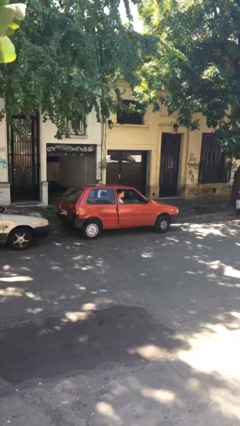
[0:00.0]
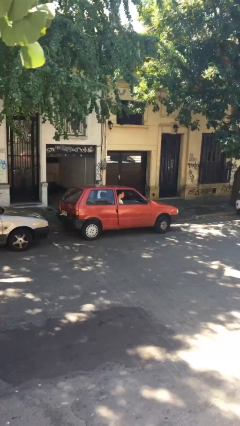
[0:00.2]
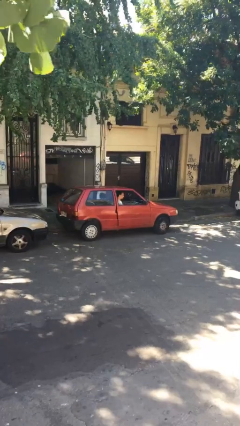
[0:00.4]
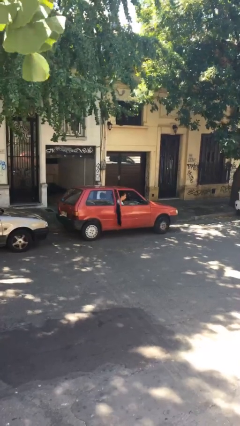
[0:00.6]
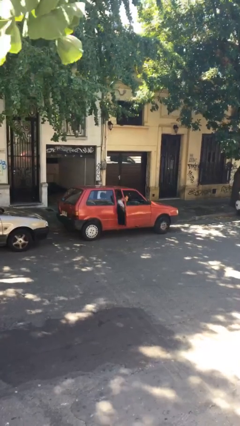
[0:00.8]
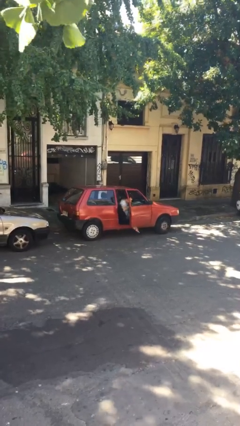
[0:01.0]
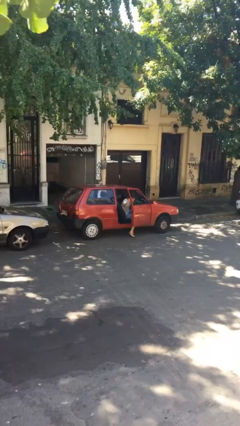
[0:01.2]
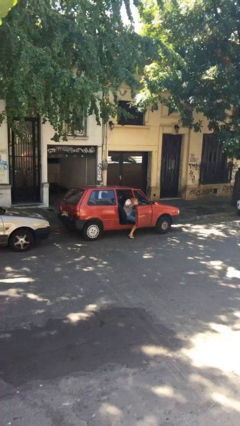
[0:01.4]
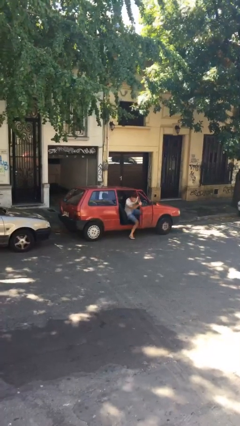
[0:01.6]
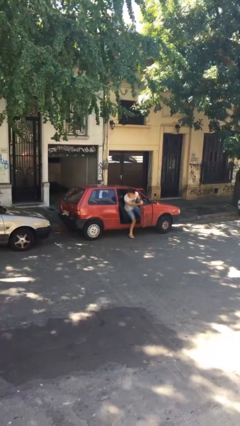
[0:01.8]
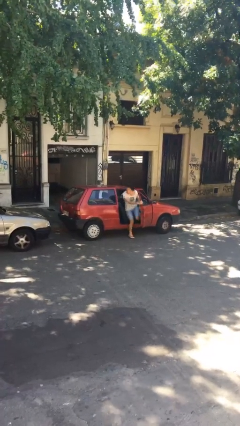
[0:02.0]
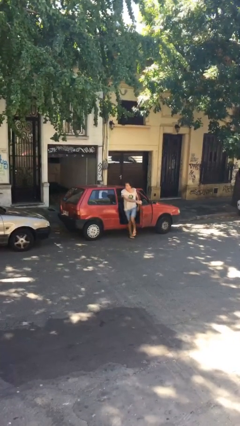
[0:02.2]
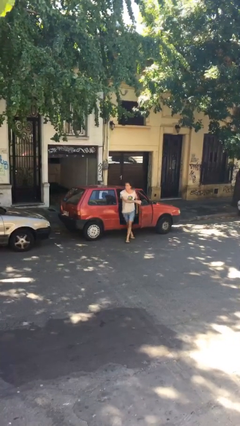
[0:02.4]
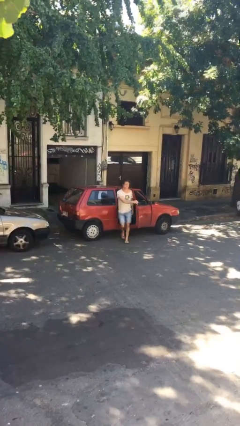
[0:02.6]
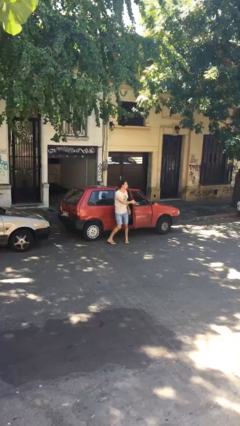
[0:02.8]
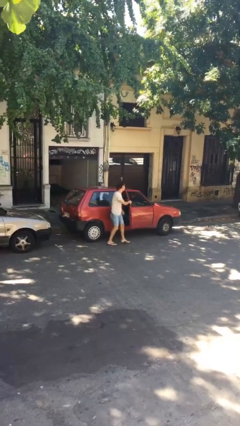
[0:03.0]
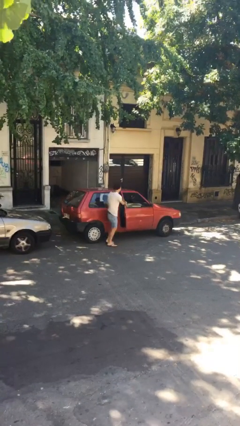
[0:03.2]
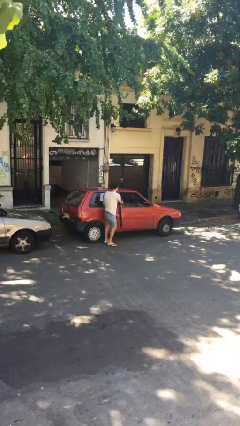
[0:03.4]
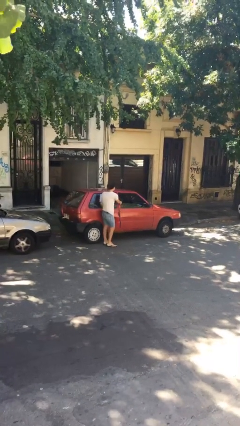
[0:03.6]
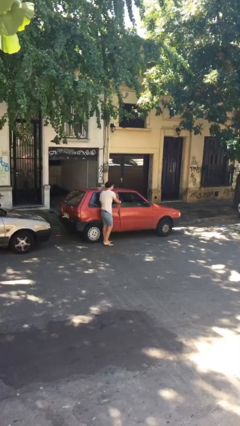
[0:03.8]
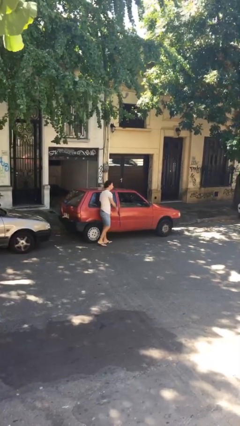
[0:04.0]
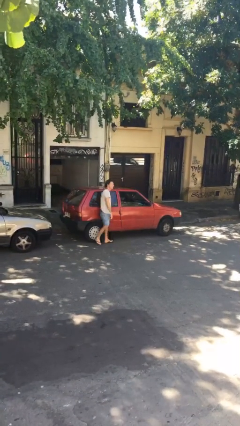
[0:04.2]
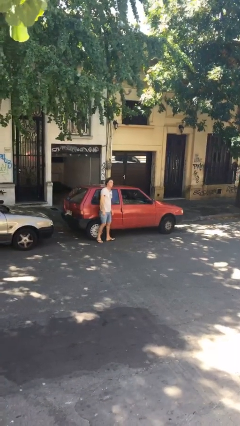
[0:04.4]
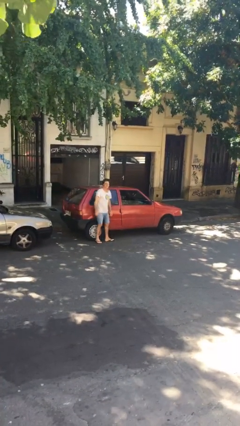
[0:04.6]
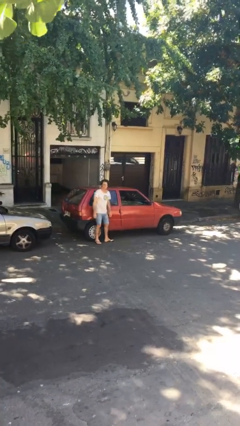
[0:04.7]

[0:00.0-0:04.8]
car drops off person

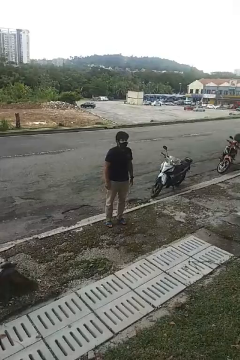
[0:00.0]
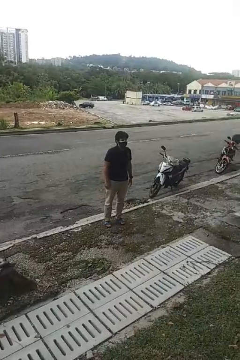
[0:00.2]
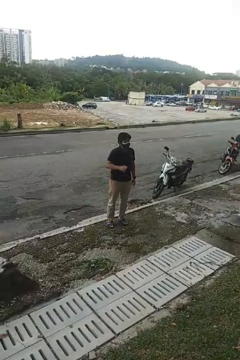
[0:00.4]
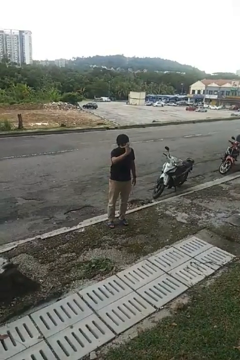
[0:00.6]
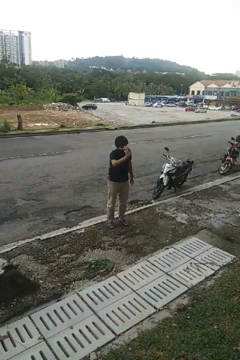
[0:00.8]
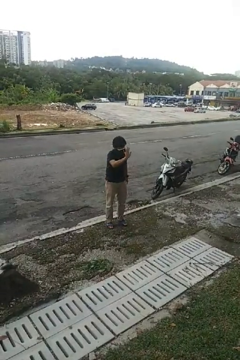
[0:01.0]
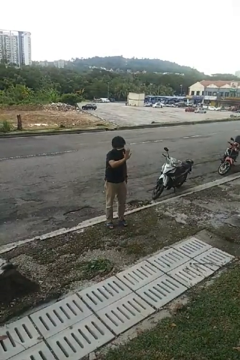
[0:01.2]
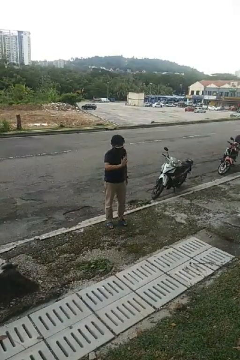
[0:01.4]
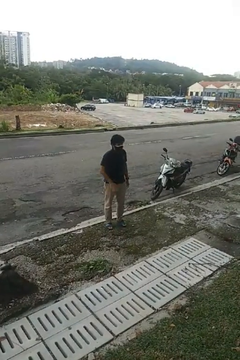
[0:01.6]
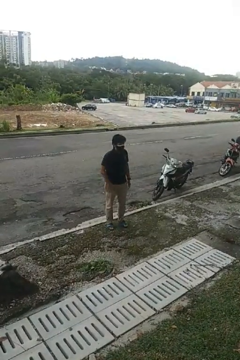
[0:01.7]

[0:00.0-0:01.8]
person gestures stop

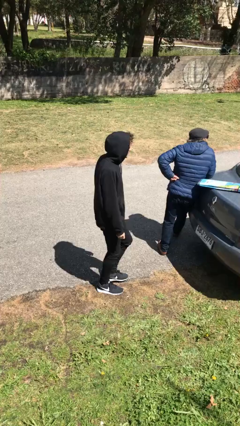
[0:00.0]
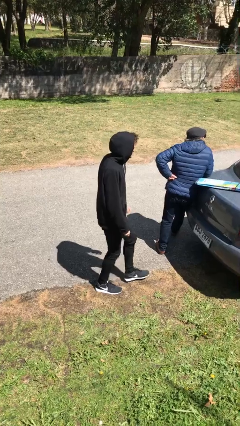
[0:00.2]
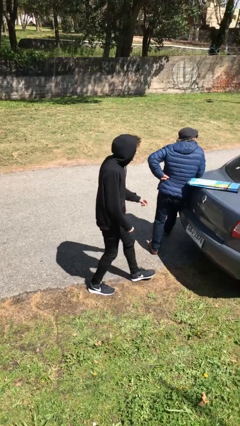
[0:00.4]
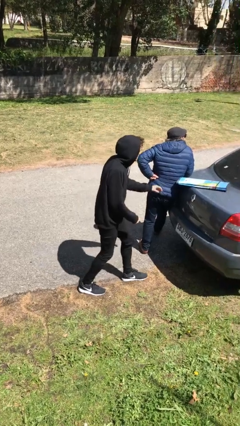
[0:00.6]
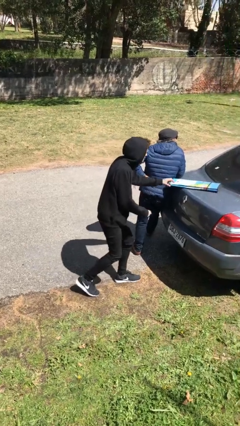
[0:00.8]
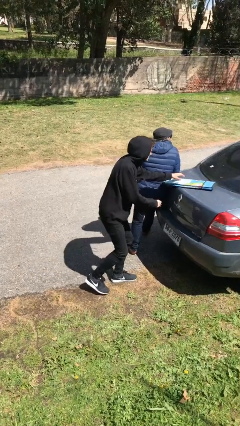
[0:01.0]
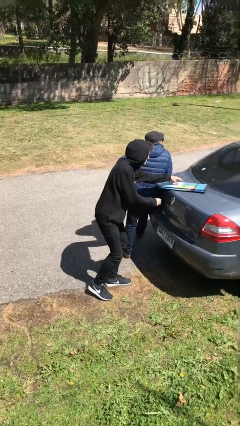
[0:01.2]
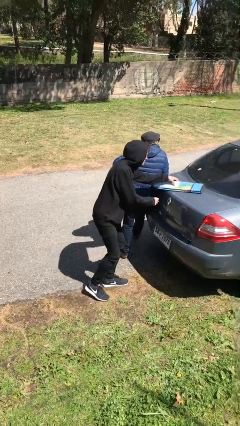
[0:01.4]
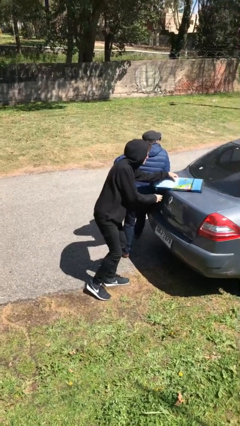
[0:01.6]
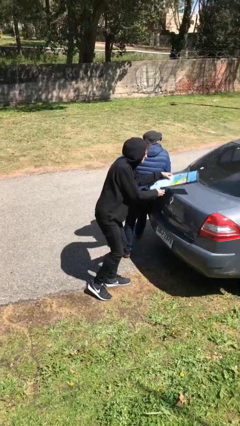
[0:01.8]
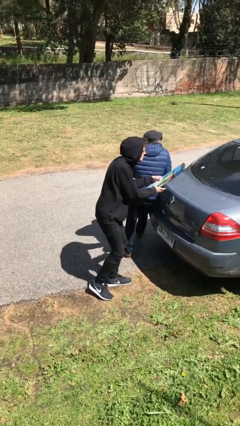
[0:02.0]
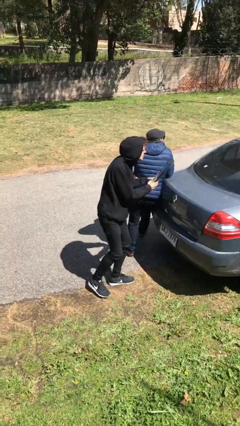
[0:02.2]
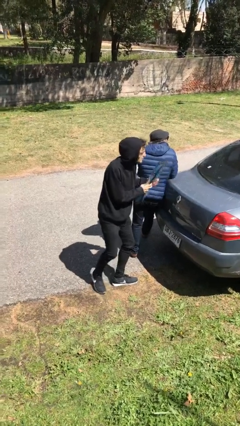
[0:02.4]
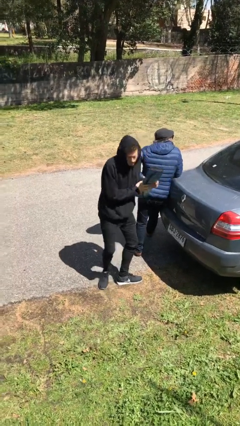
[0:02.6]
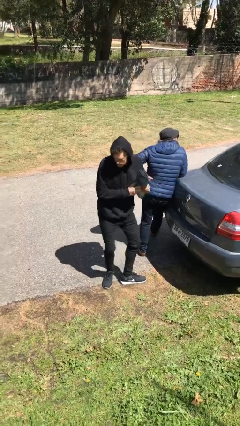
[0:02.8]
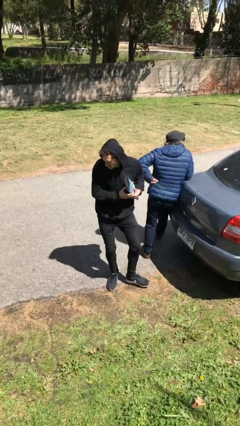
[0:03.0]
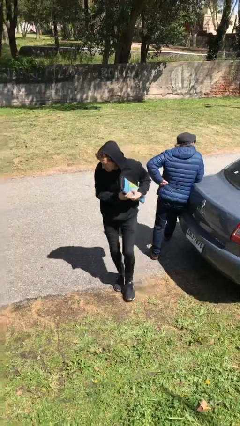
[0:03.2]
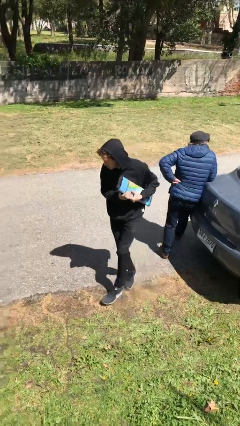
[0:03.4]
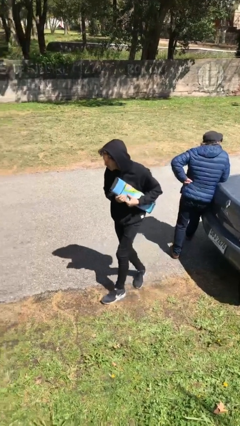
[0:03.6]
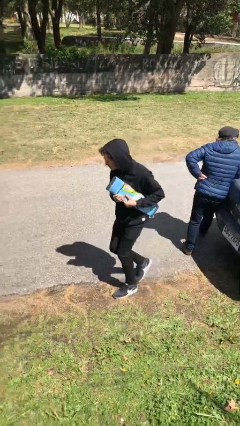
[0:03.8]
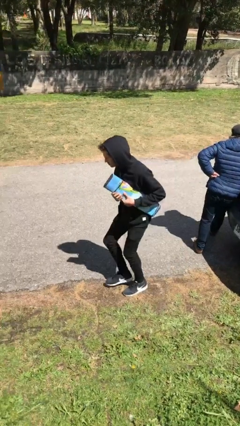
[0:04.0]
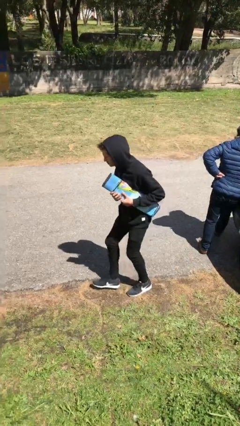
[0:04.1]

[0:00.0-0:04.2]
person steals object from person

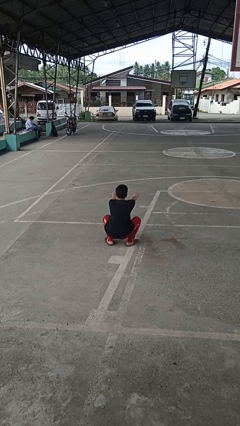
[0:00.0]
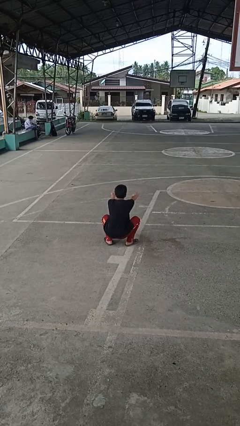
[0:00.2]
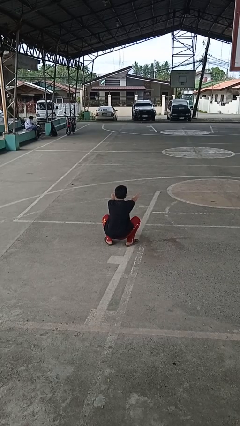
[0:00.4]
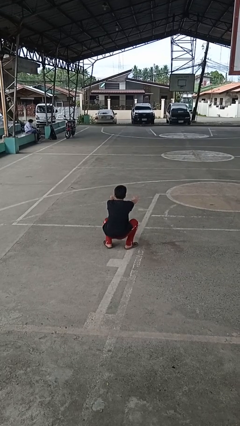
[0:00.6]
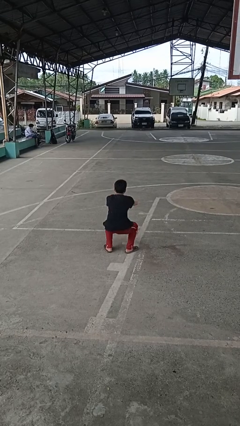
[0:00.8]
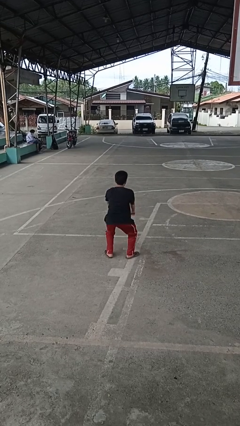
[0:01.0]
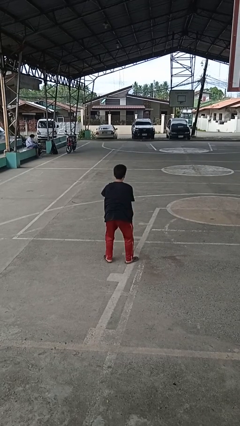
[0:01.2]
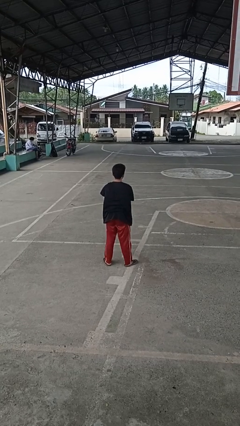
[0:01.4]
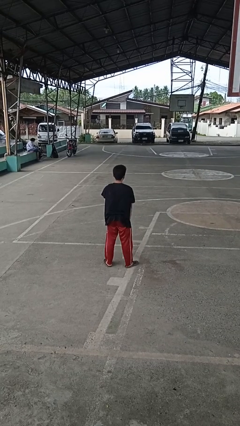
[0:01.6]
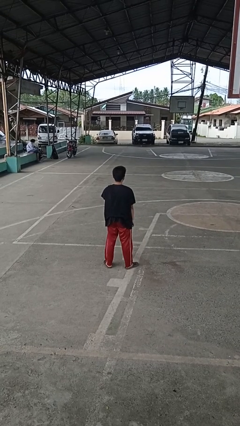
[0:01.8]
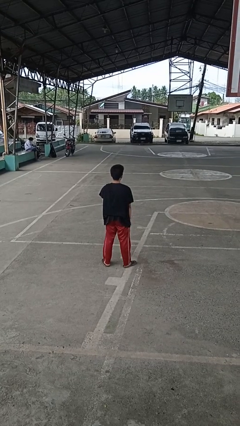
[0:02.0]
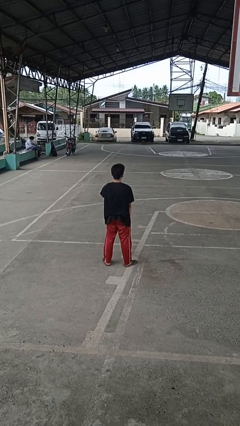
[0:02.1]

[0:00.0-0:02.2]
person stands up

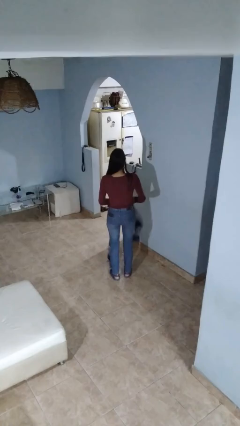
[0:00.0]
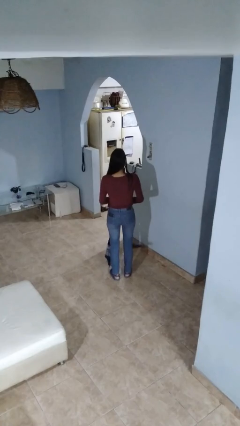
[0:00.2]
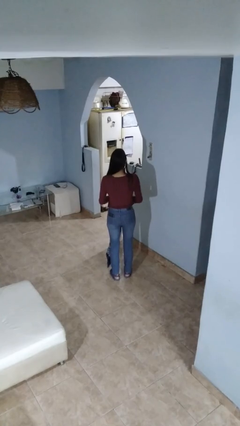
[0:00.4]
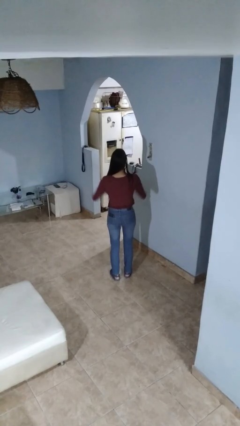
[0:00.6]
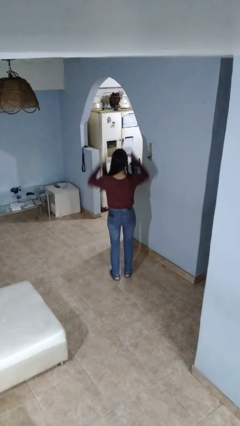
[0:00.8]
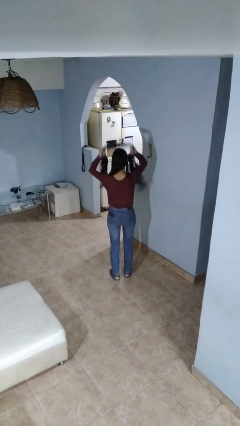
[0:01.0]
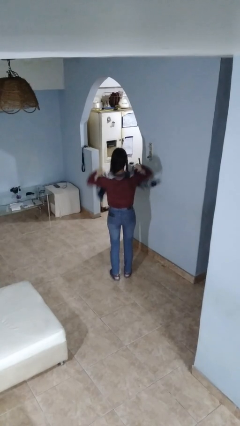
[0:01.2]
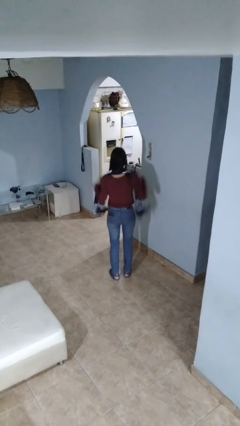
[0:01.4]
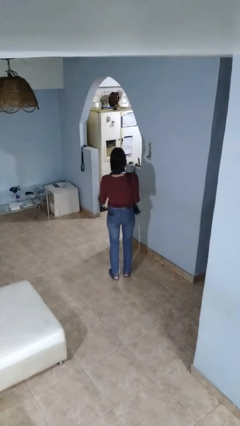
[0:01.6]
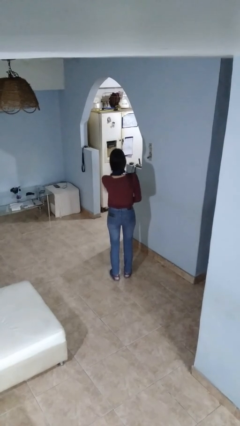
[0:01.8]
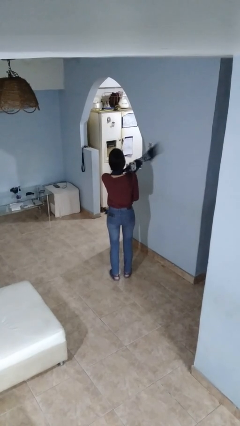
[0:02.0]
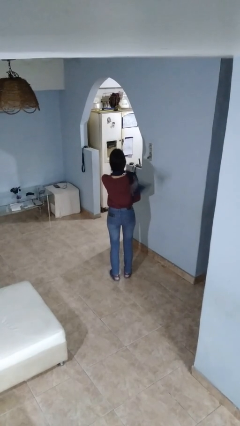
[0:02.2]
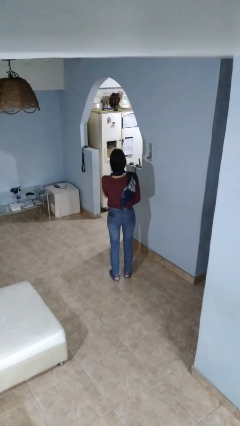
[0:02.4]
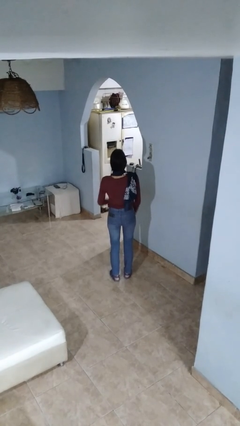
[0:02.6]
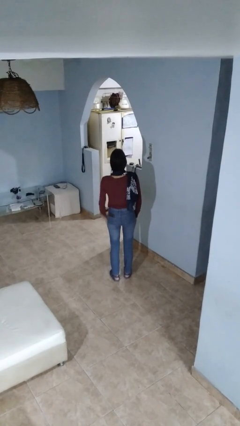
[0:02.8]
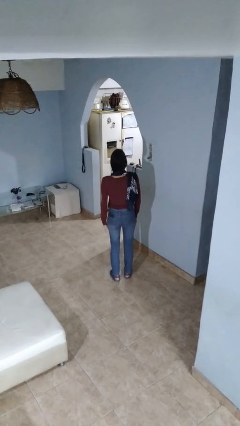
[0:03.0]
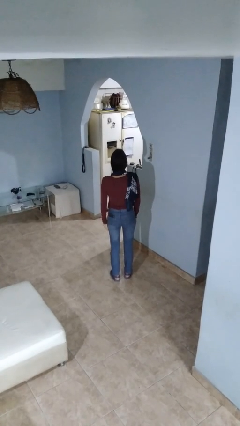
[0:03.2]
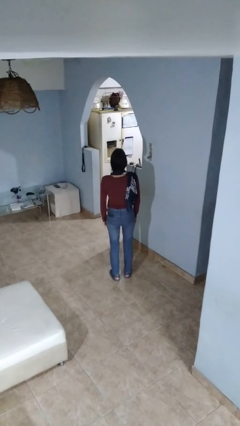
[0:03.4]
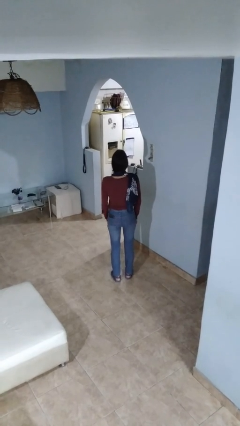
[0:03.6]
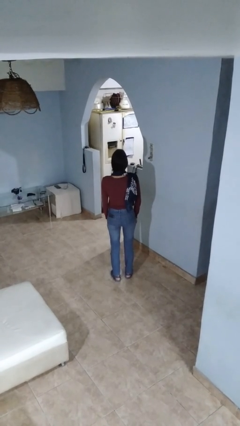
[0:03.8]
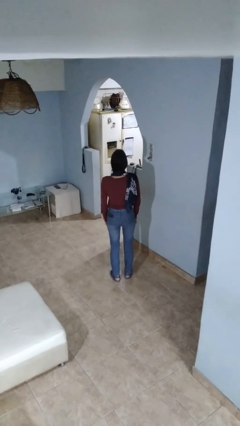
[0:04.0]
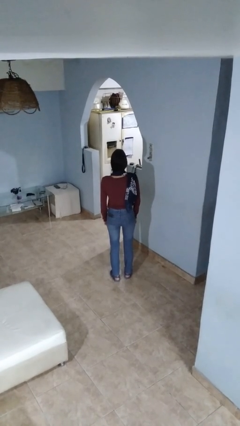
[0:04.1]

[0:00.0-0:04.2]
person puts on scarf

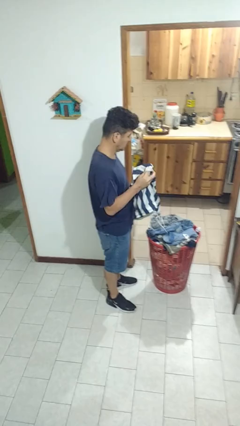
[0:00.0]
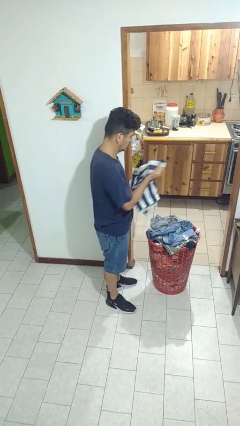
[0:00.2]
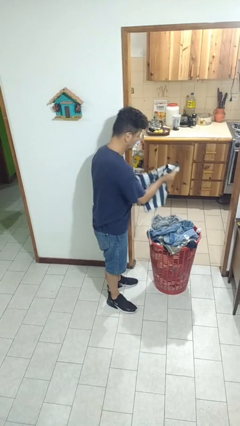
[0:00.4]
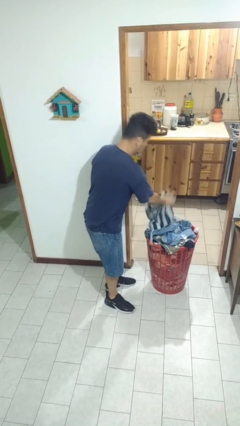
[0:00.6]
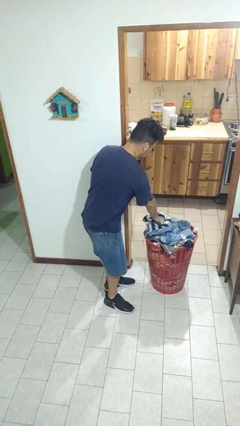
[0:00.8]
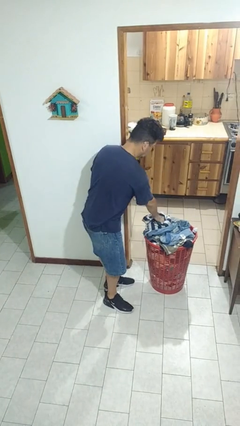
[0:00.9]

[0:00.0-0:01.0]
person puts object into basket
